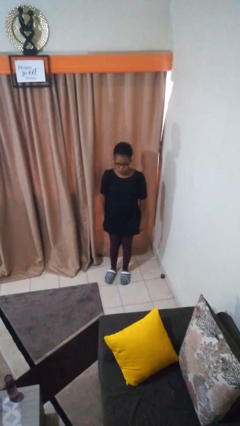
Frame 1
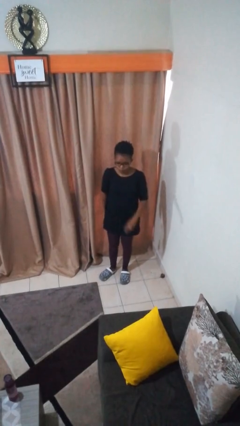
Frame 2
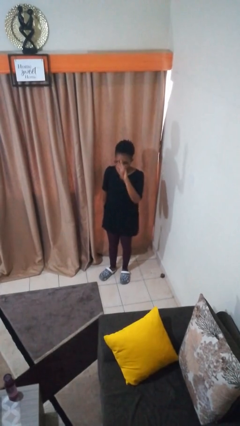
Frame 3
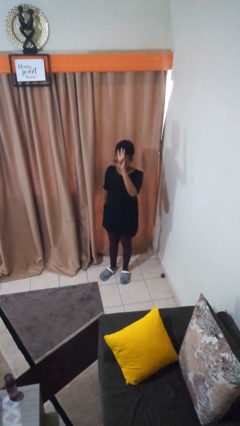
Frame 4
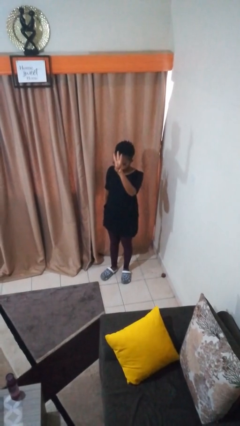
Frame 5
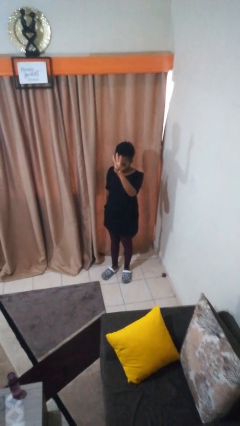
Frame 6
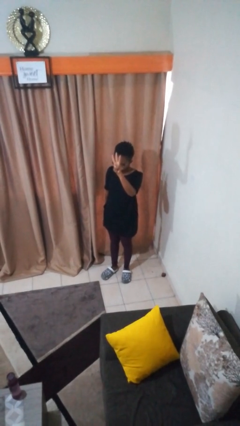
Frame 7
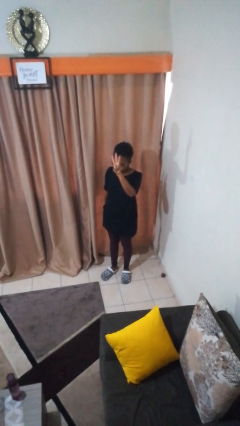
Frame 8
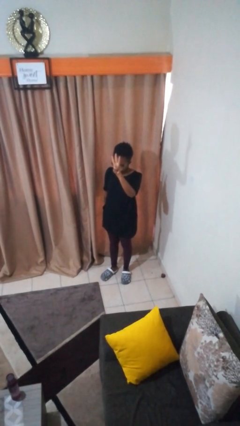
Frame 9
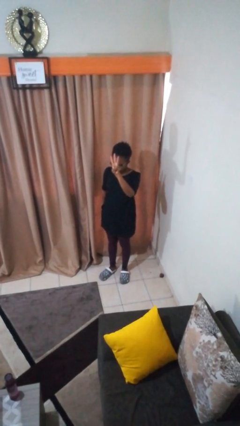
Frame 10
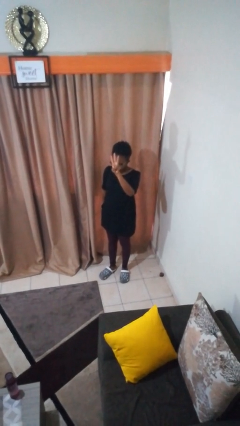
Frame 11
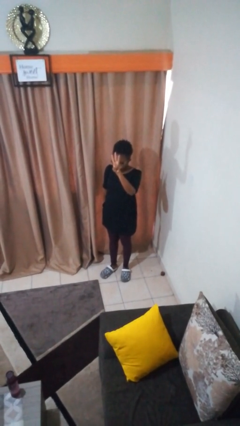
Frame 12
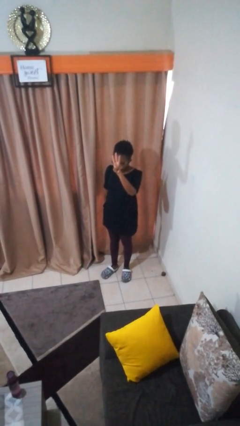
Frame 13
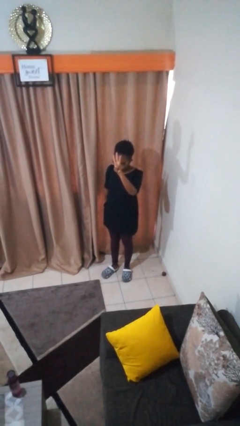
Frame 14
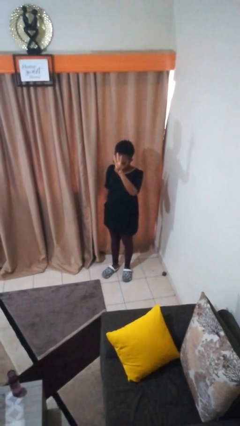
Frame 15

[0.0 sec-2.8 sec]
person gestures number three

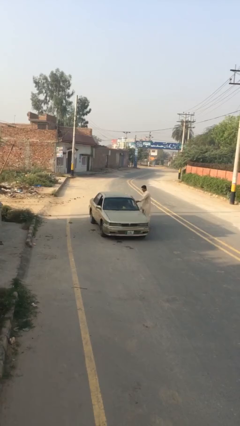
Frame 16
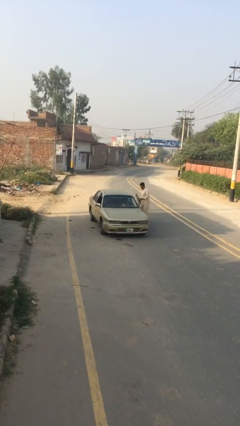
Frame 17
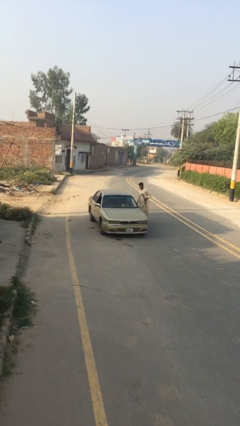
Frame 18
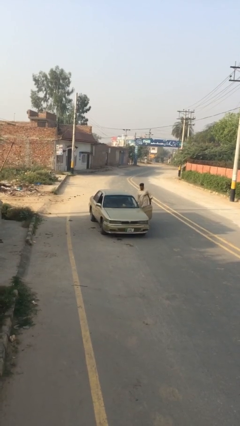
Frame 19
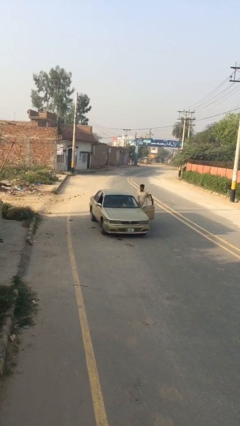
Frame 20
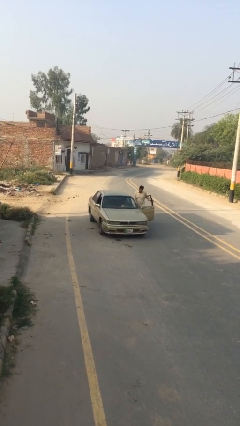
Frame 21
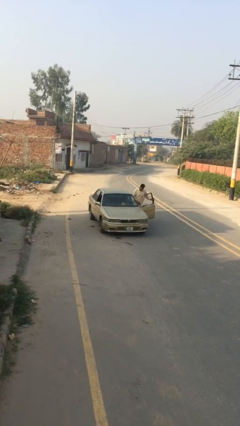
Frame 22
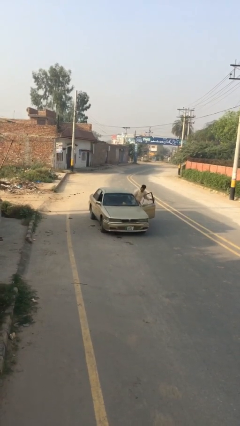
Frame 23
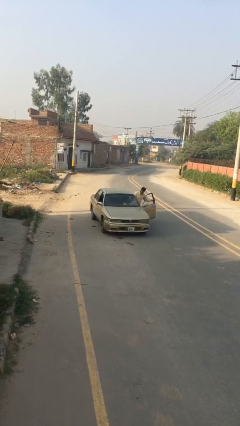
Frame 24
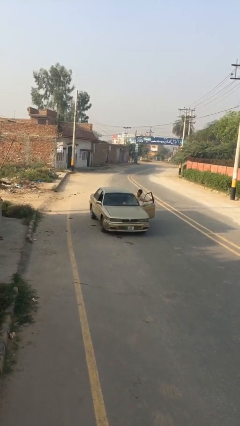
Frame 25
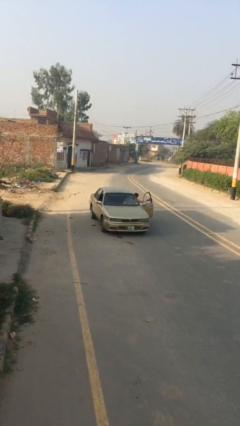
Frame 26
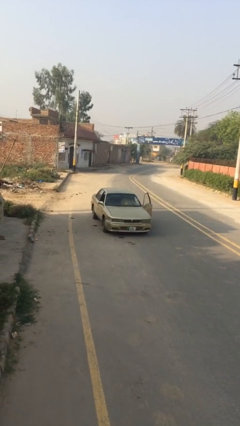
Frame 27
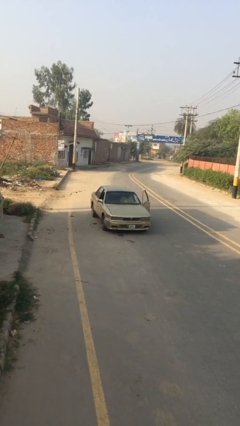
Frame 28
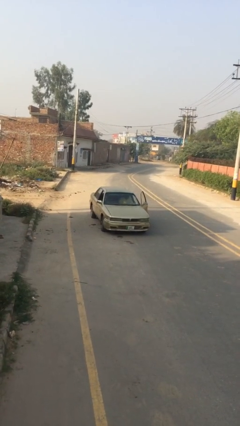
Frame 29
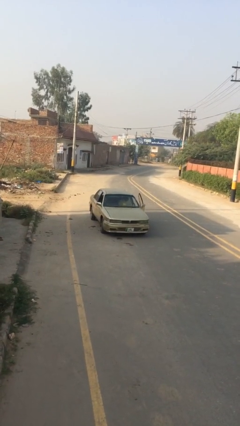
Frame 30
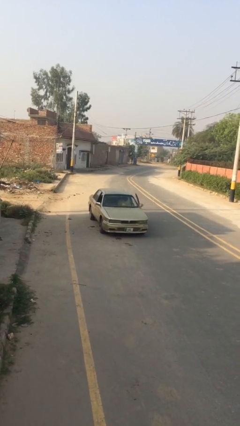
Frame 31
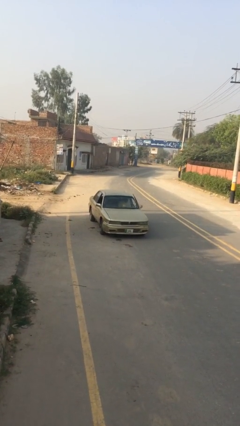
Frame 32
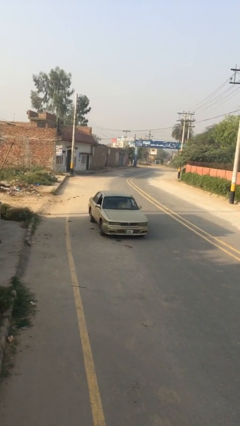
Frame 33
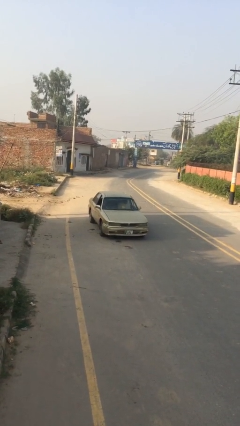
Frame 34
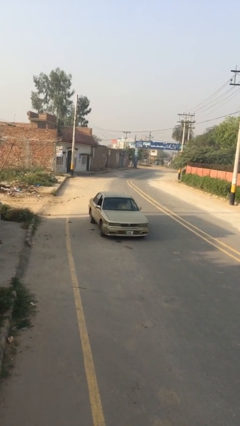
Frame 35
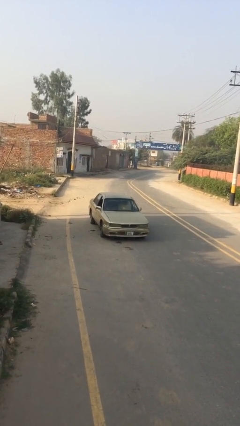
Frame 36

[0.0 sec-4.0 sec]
car picks up person

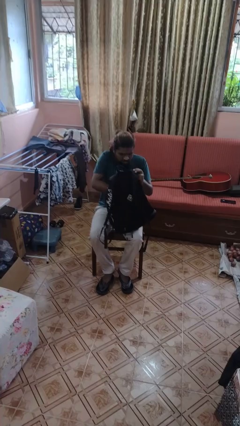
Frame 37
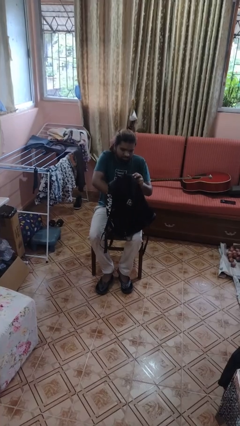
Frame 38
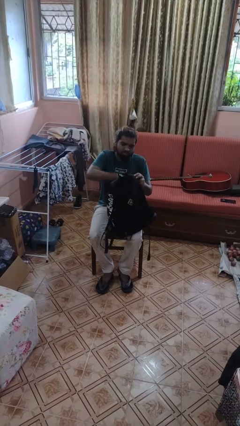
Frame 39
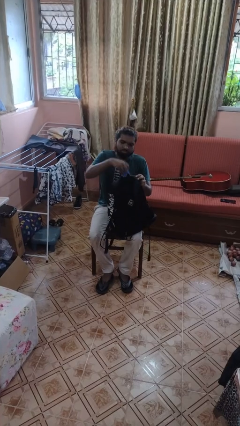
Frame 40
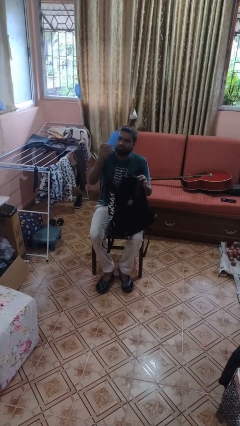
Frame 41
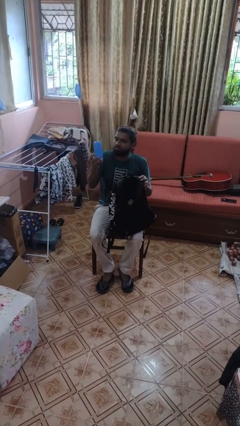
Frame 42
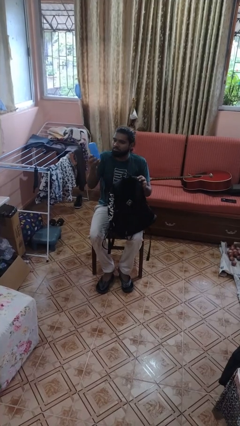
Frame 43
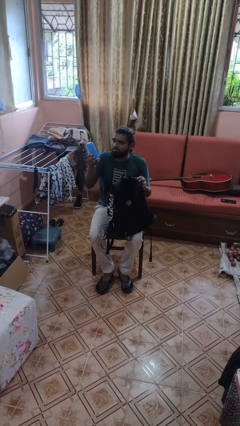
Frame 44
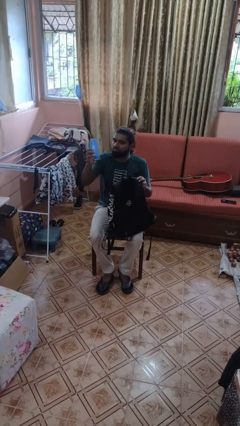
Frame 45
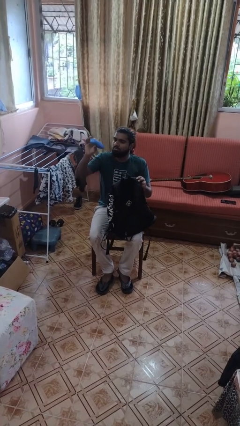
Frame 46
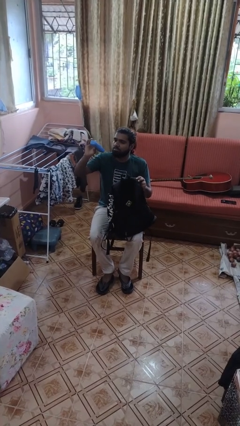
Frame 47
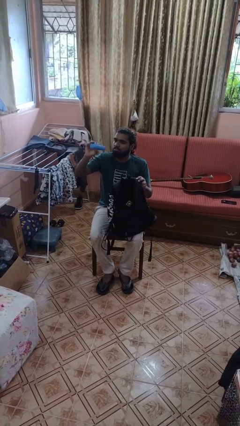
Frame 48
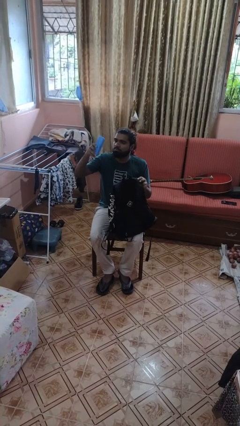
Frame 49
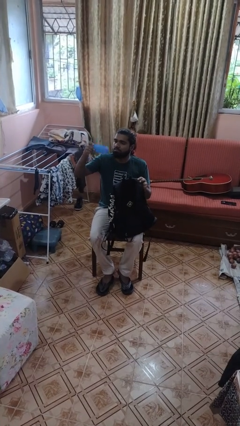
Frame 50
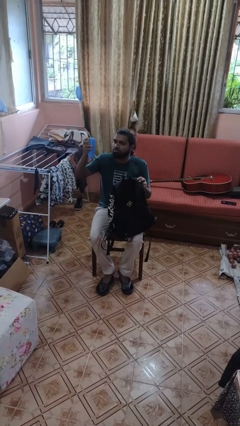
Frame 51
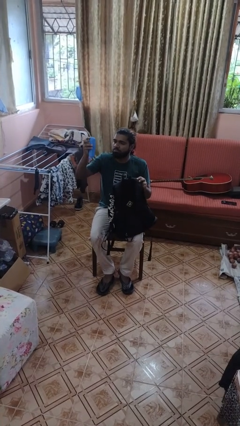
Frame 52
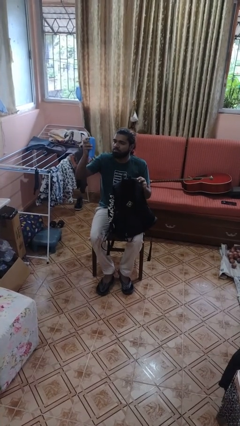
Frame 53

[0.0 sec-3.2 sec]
person takes object from backpack

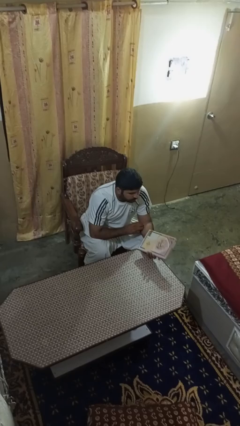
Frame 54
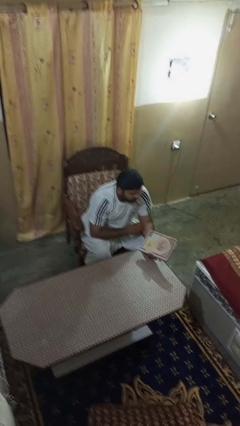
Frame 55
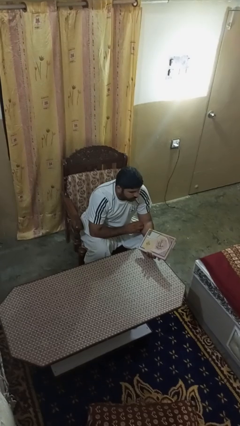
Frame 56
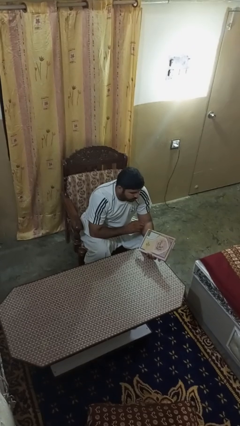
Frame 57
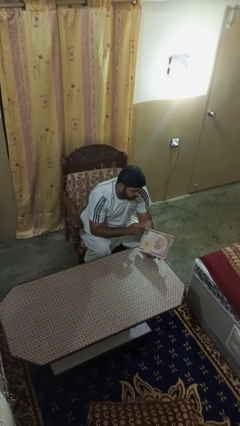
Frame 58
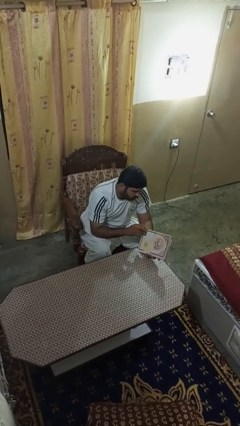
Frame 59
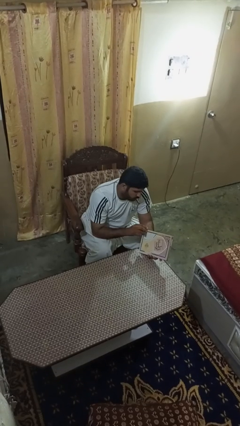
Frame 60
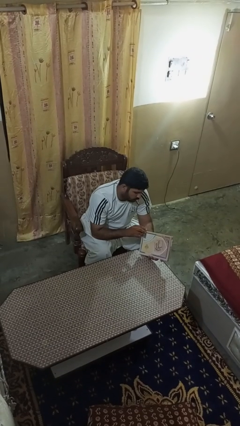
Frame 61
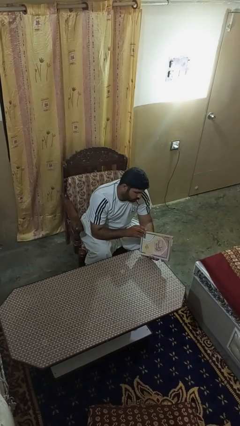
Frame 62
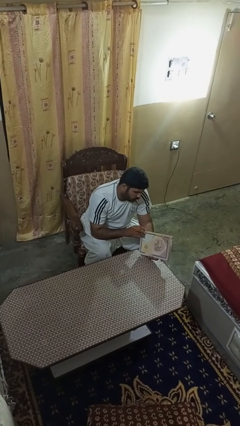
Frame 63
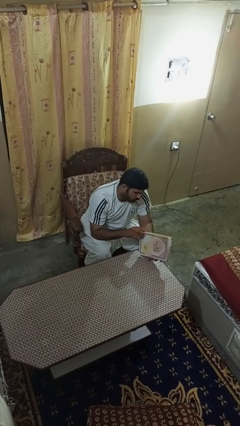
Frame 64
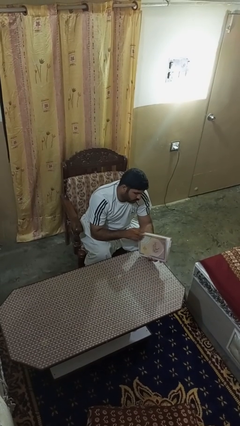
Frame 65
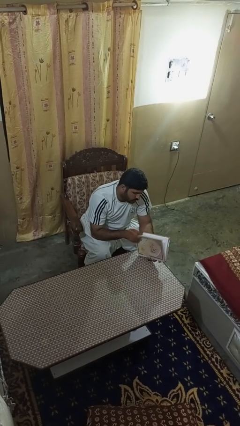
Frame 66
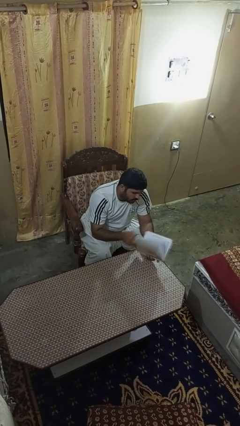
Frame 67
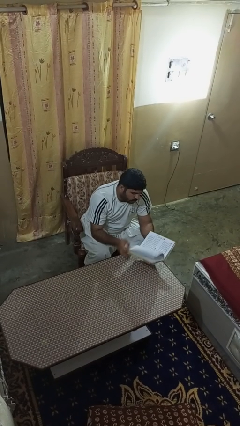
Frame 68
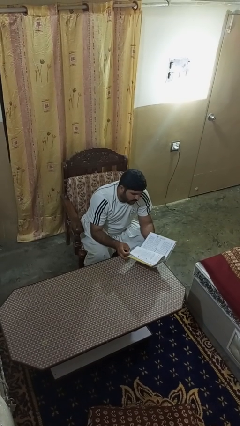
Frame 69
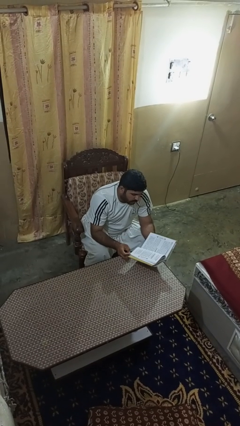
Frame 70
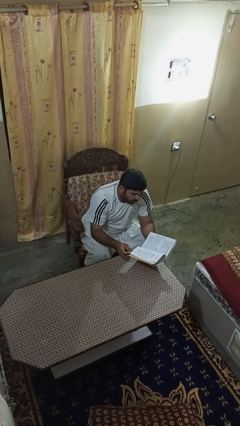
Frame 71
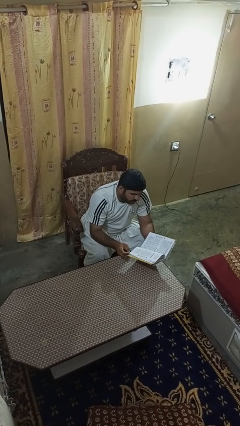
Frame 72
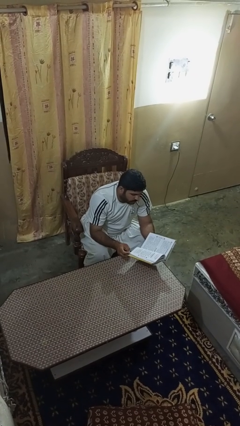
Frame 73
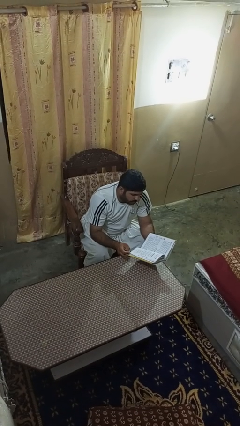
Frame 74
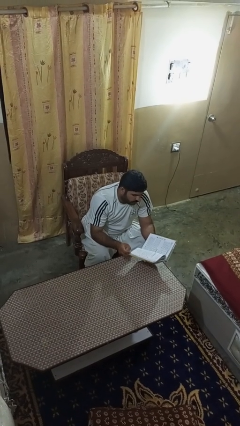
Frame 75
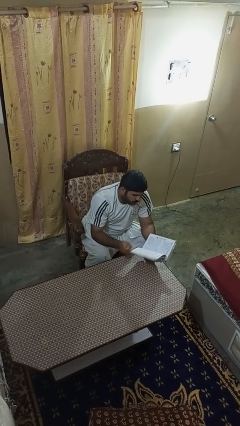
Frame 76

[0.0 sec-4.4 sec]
person reads book

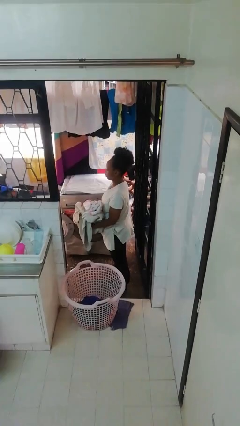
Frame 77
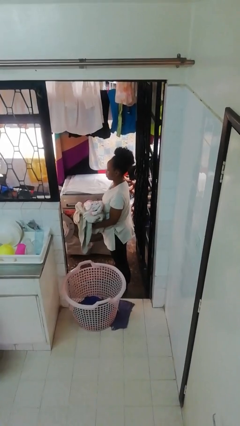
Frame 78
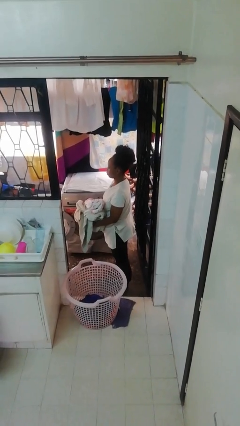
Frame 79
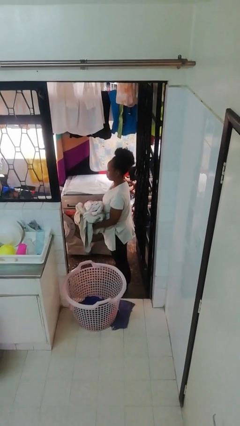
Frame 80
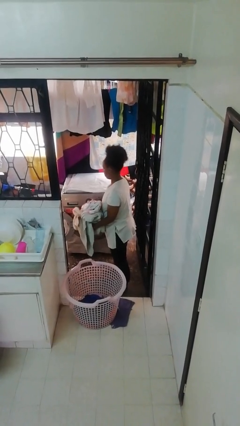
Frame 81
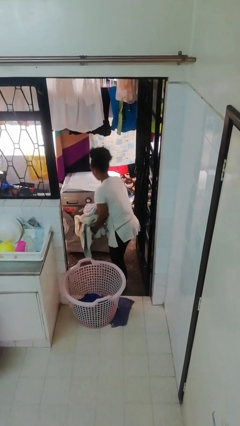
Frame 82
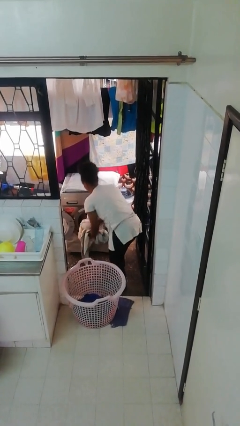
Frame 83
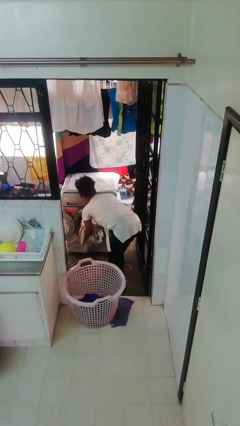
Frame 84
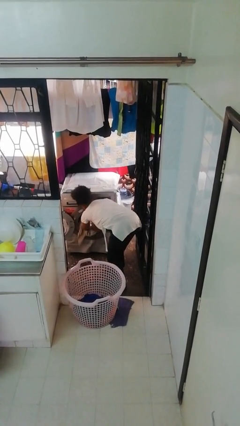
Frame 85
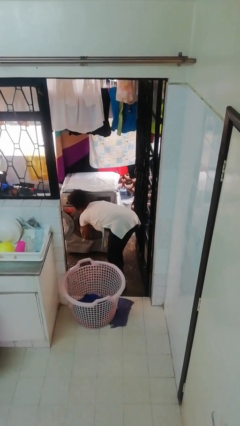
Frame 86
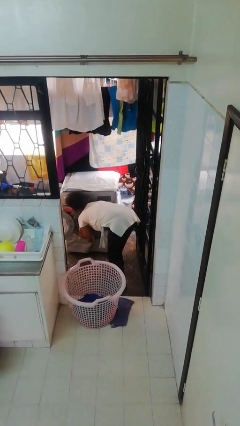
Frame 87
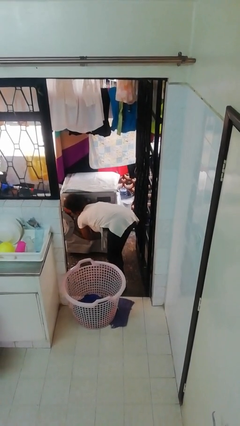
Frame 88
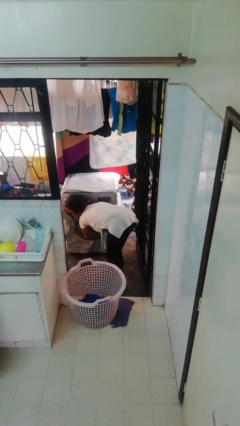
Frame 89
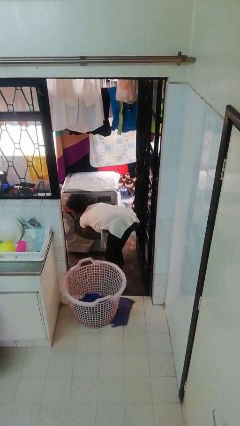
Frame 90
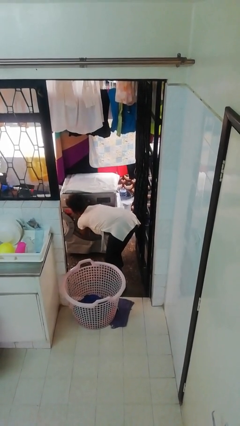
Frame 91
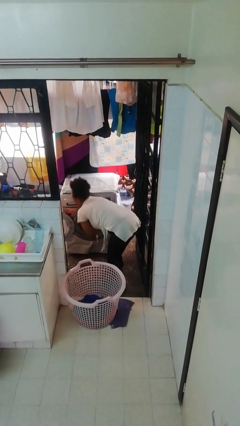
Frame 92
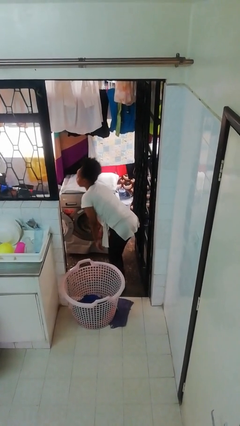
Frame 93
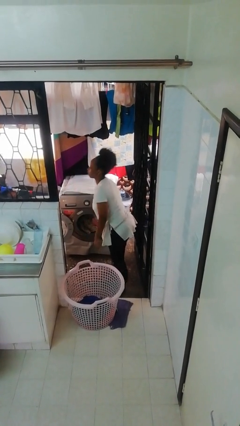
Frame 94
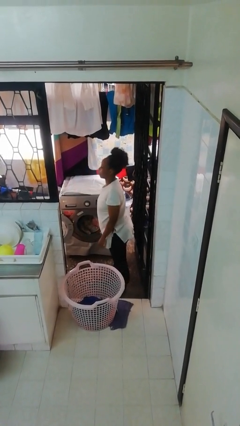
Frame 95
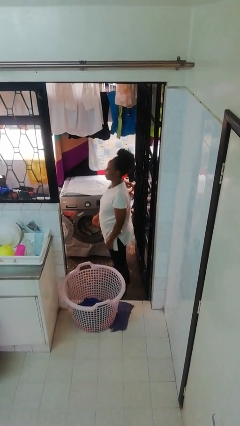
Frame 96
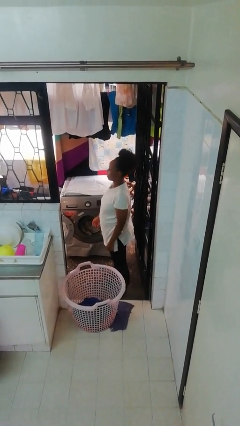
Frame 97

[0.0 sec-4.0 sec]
person loads dryer
